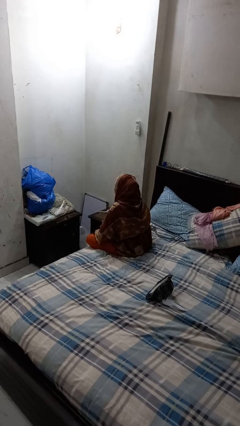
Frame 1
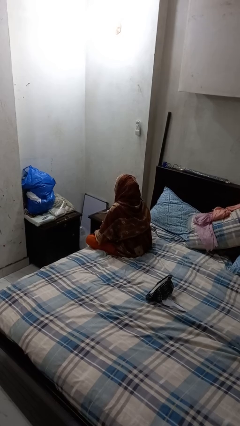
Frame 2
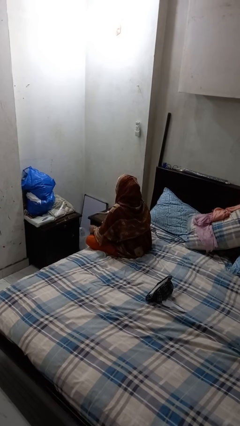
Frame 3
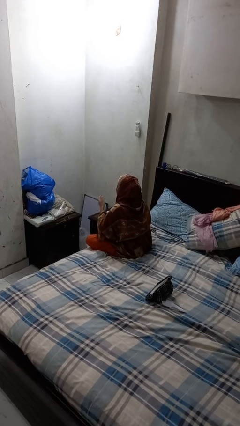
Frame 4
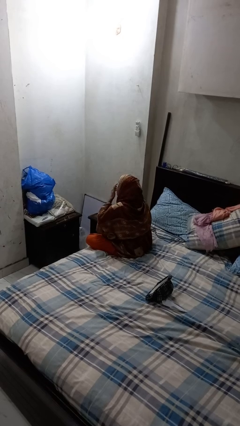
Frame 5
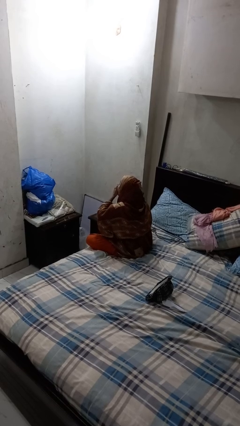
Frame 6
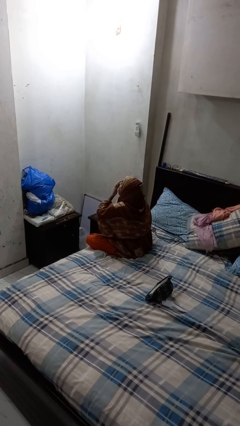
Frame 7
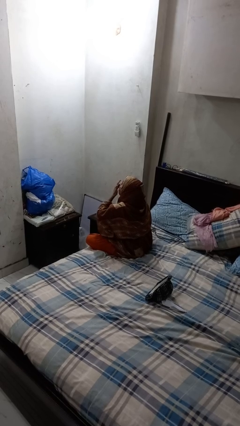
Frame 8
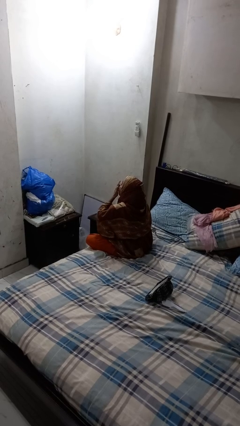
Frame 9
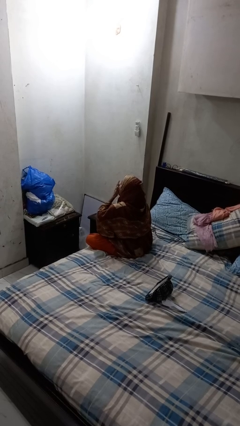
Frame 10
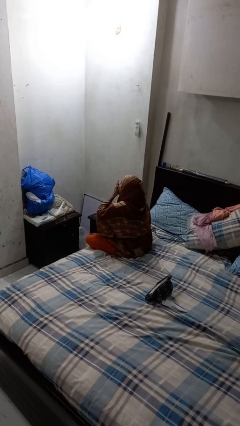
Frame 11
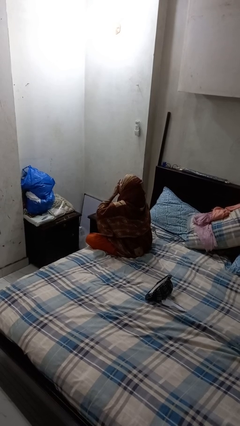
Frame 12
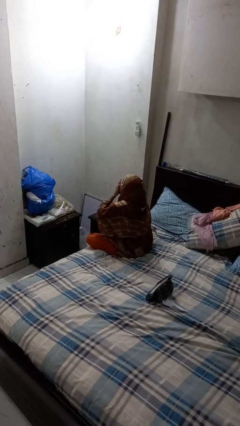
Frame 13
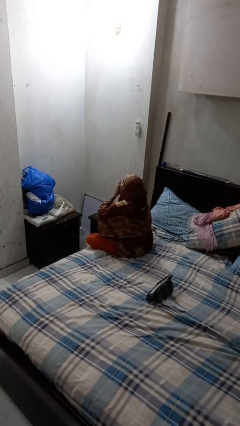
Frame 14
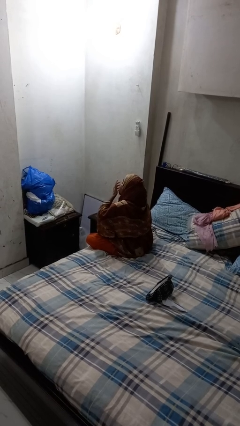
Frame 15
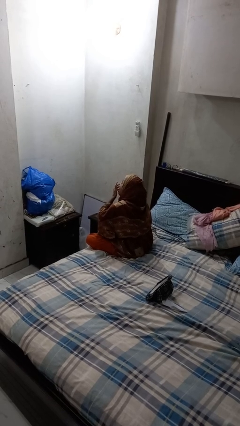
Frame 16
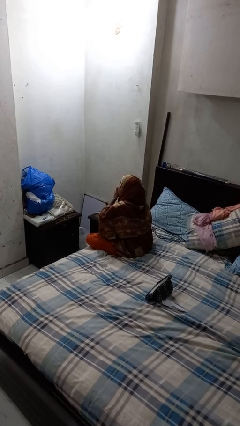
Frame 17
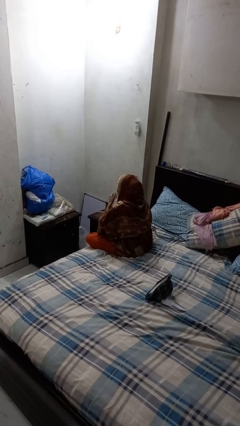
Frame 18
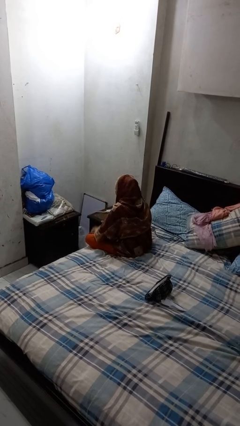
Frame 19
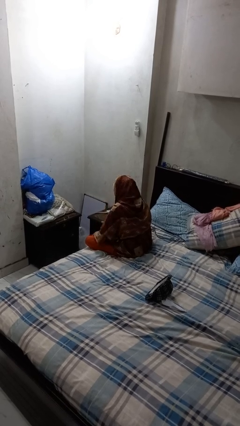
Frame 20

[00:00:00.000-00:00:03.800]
person yawns

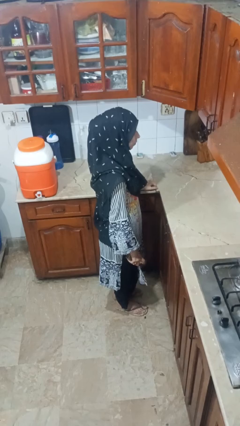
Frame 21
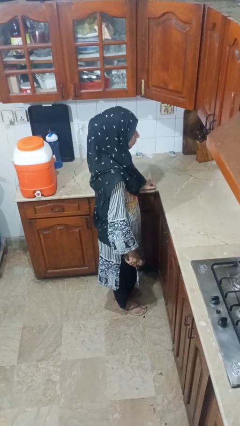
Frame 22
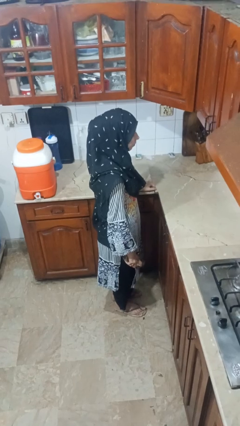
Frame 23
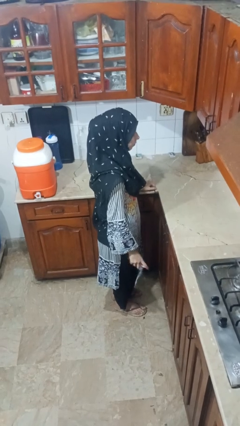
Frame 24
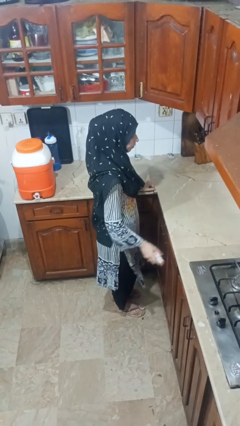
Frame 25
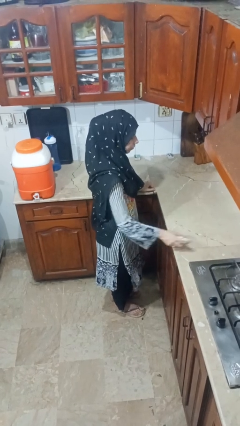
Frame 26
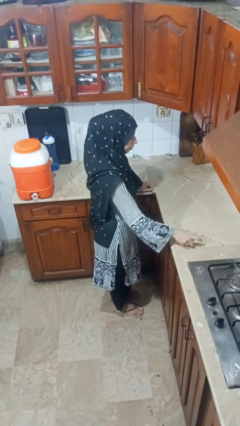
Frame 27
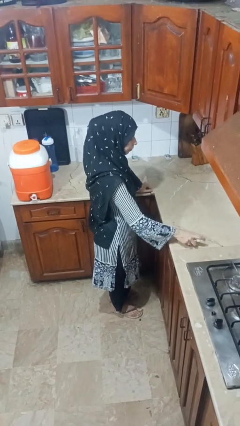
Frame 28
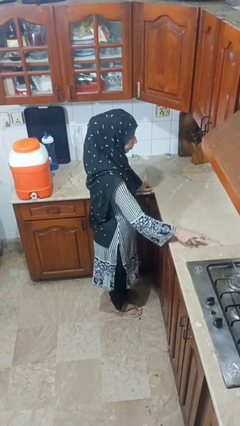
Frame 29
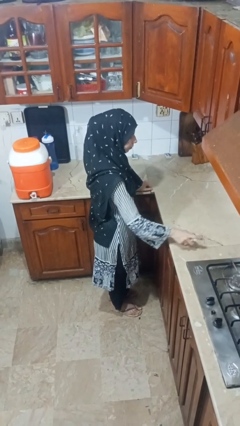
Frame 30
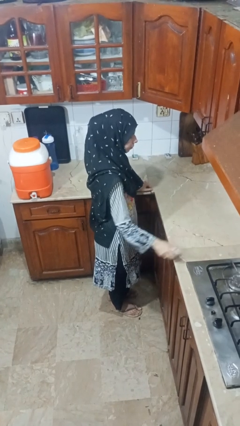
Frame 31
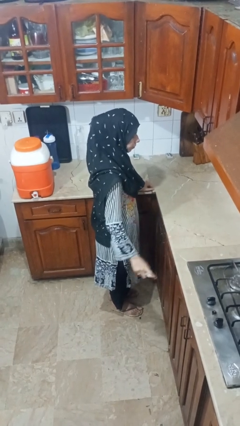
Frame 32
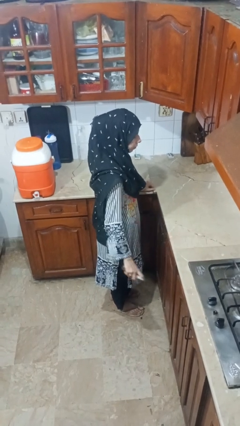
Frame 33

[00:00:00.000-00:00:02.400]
person sprays from bottle

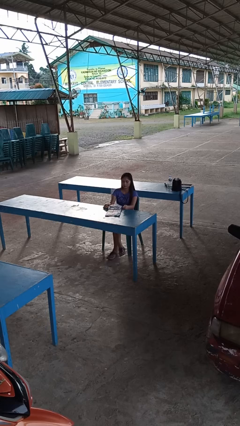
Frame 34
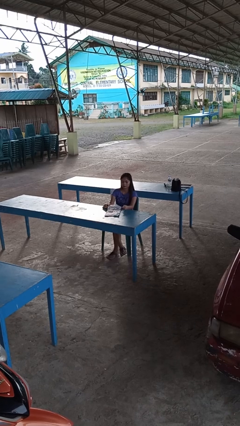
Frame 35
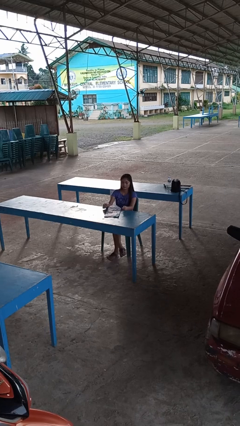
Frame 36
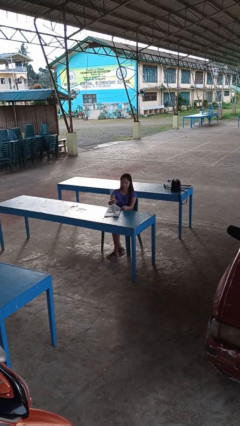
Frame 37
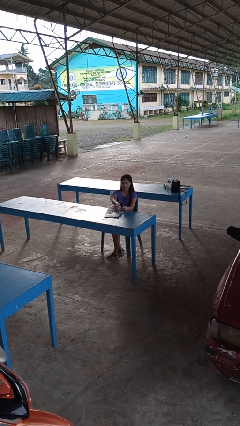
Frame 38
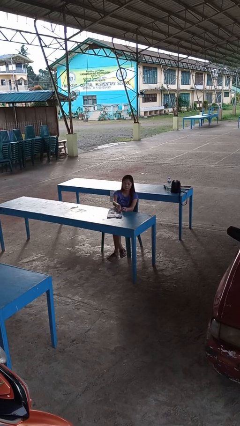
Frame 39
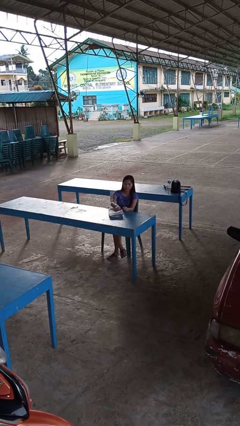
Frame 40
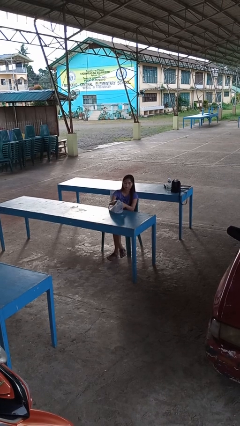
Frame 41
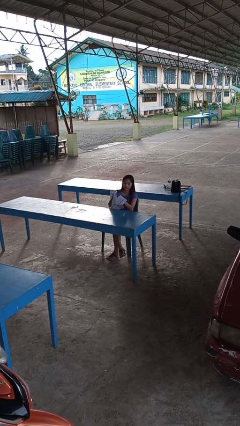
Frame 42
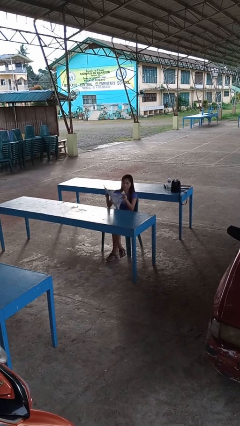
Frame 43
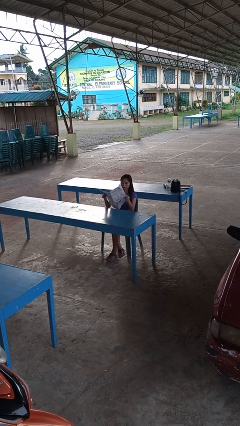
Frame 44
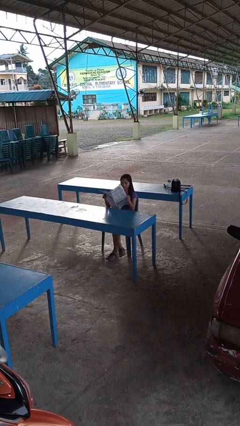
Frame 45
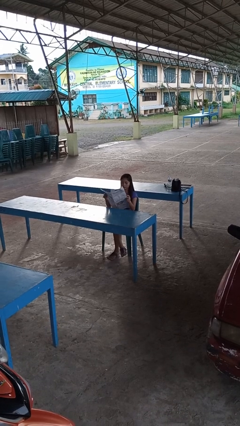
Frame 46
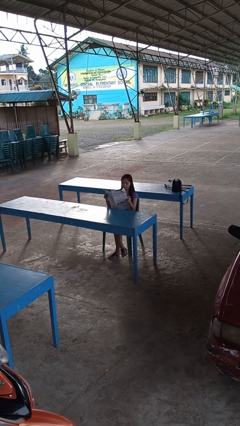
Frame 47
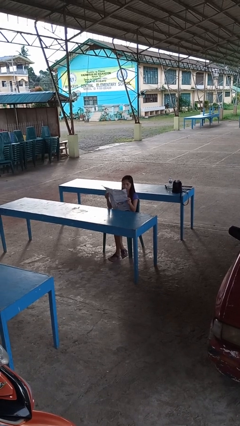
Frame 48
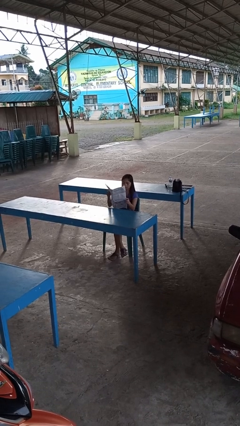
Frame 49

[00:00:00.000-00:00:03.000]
person reads newspaper

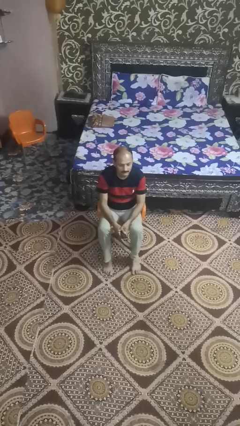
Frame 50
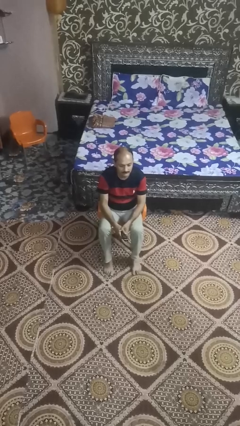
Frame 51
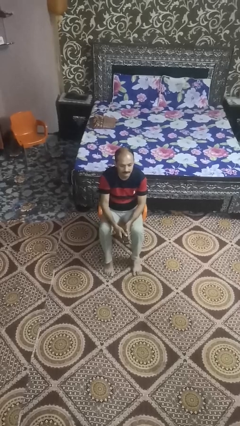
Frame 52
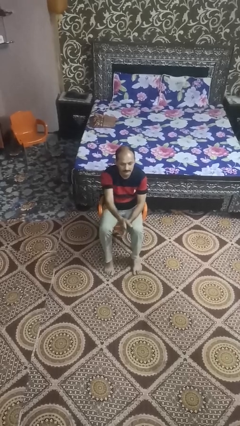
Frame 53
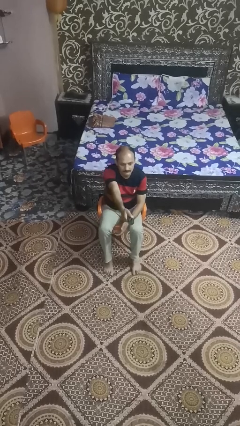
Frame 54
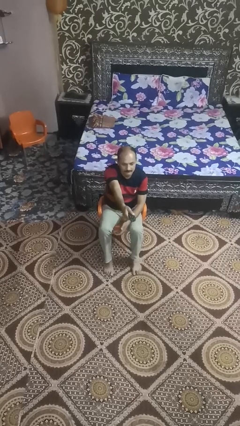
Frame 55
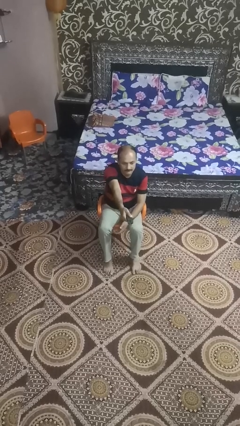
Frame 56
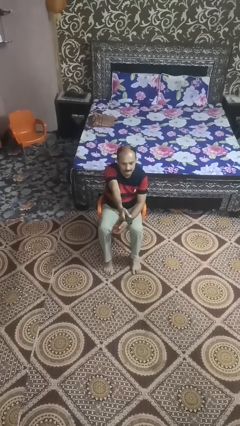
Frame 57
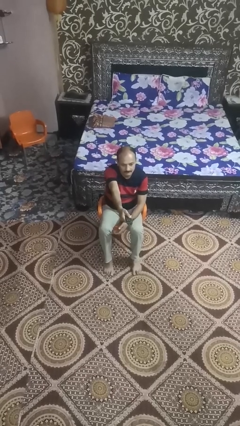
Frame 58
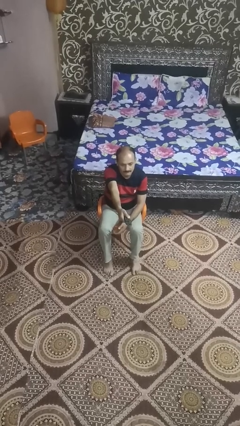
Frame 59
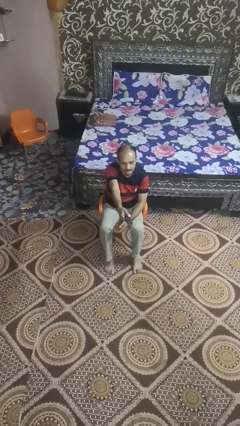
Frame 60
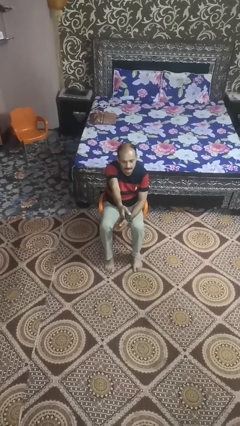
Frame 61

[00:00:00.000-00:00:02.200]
person uses television remote

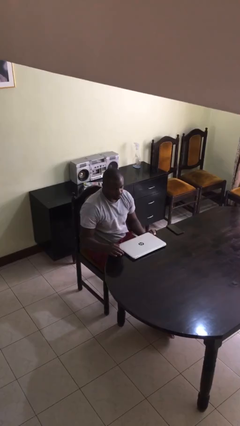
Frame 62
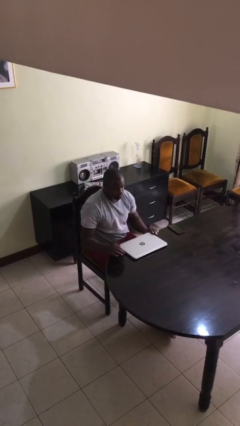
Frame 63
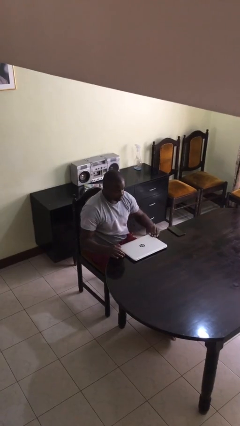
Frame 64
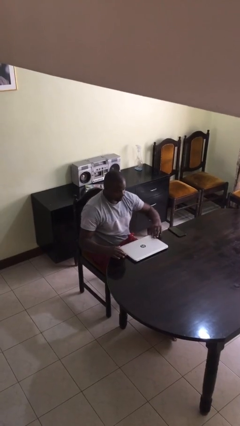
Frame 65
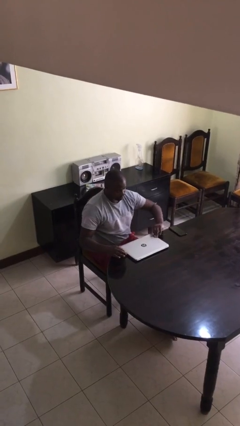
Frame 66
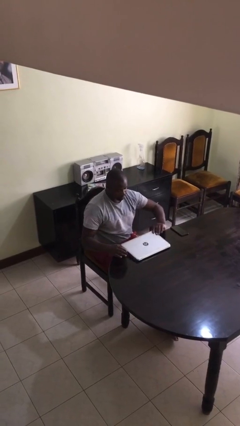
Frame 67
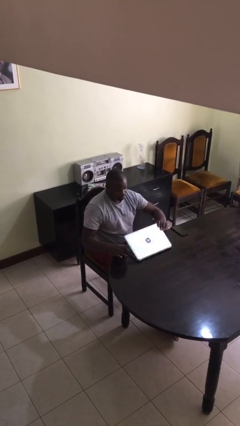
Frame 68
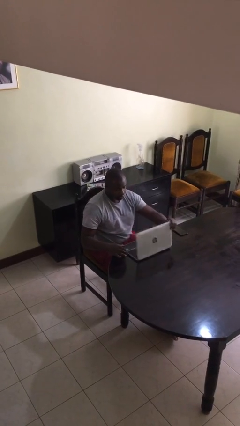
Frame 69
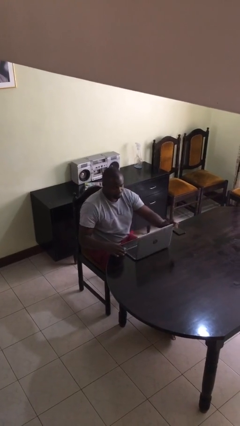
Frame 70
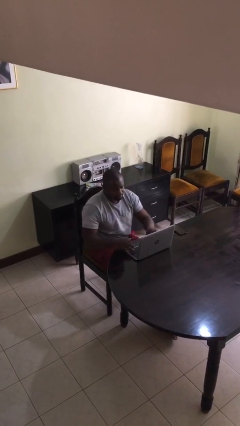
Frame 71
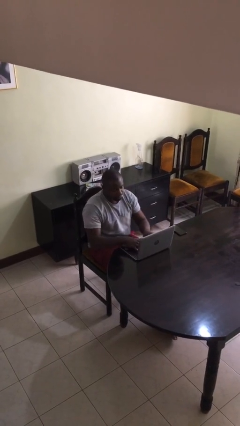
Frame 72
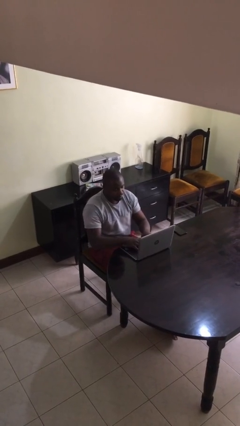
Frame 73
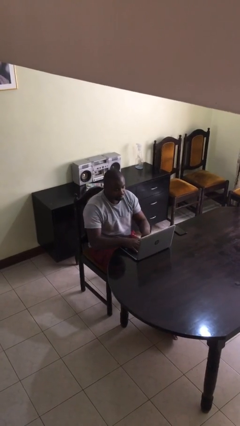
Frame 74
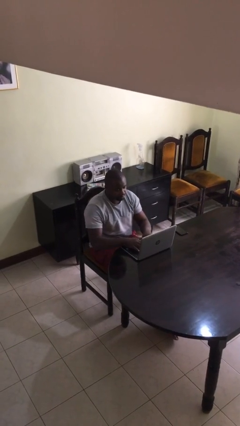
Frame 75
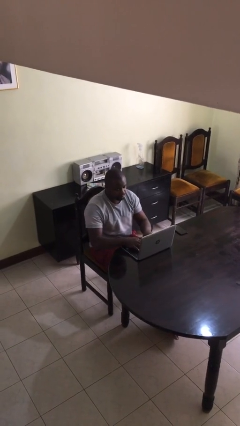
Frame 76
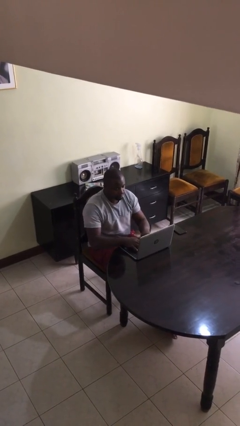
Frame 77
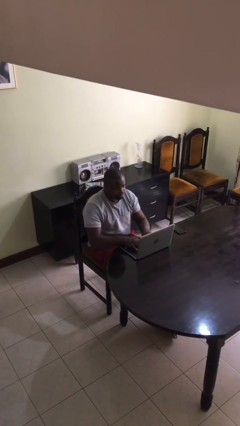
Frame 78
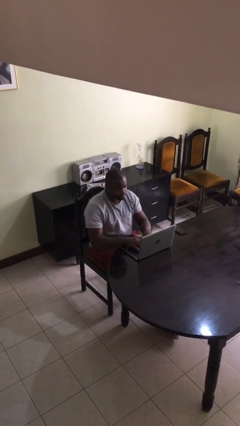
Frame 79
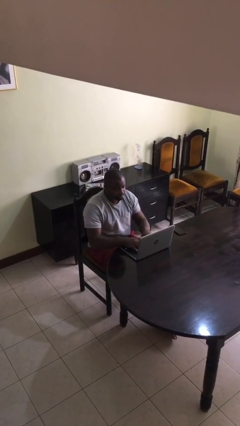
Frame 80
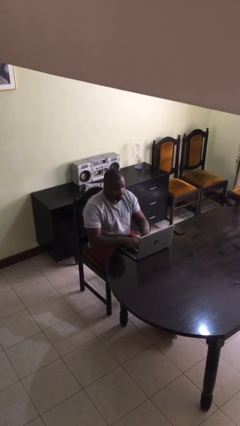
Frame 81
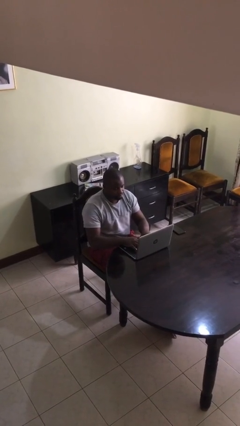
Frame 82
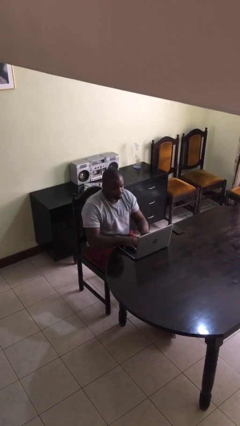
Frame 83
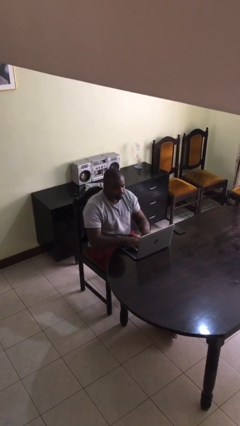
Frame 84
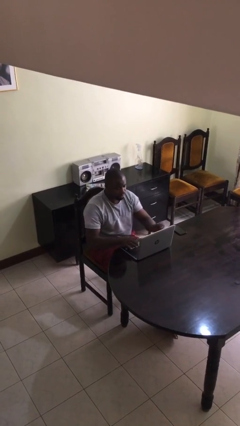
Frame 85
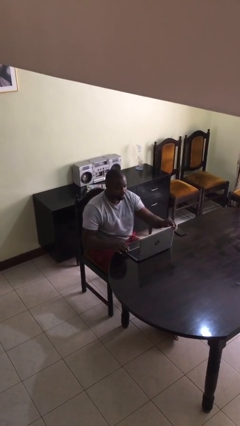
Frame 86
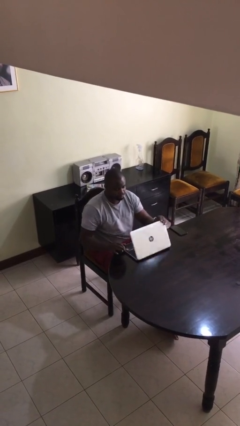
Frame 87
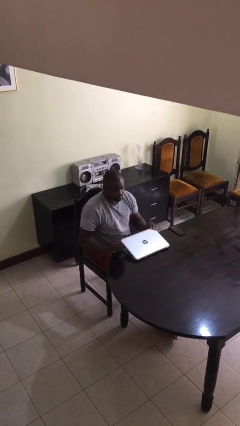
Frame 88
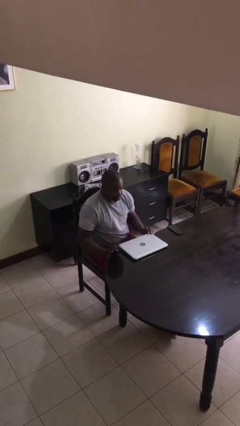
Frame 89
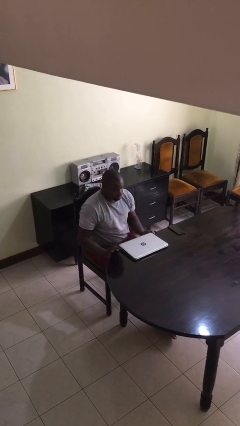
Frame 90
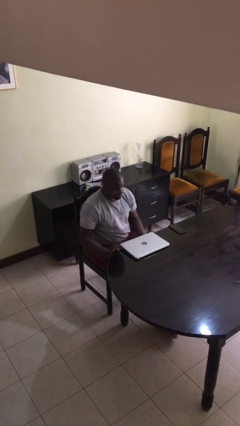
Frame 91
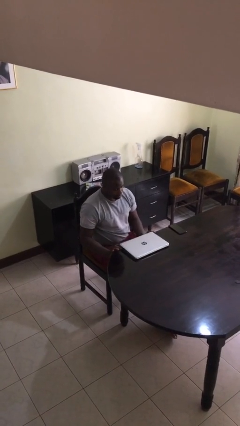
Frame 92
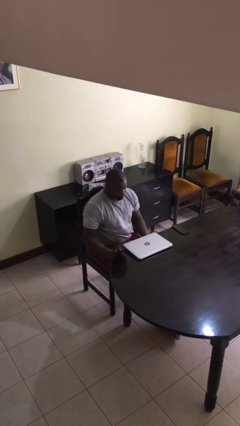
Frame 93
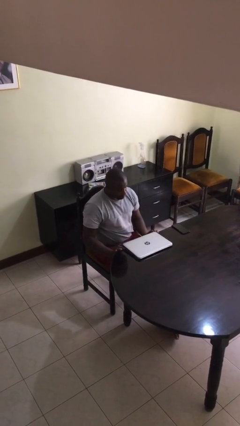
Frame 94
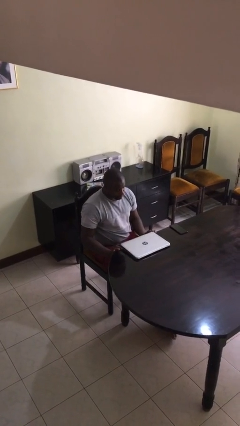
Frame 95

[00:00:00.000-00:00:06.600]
person interacts with laptop
